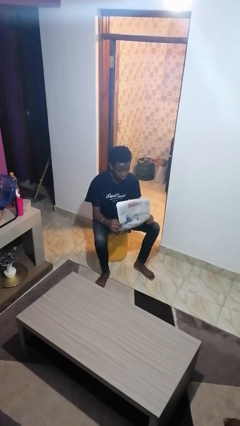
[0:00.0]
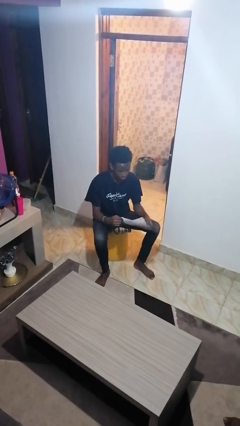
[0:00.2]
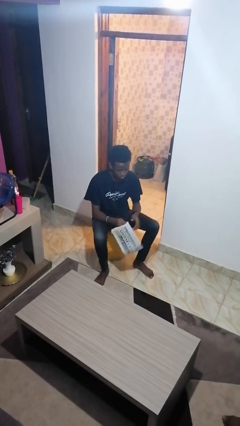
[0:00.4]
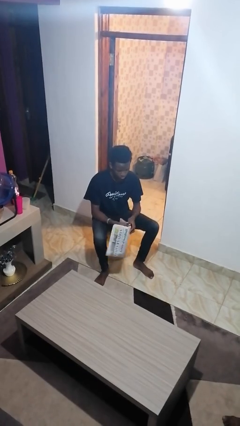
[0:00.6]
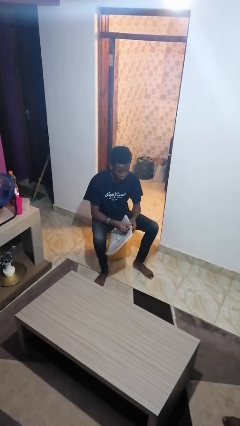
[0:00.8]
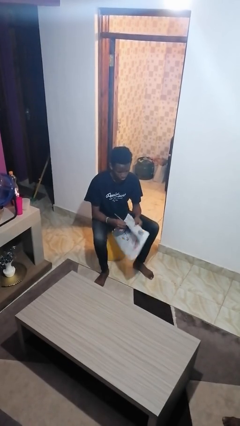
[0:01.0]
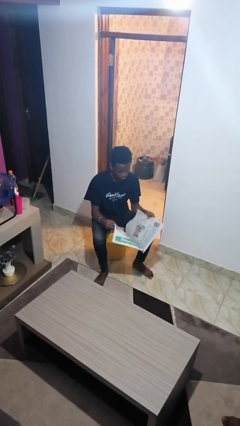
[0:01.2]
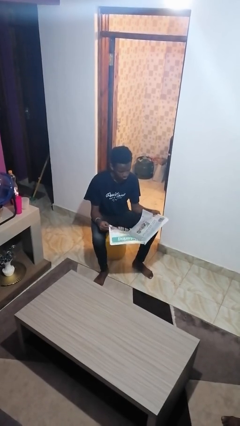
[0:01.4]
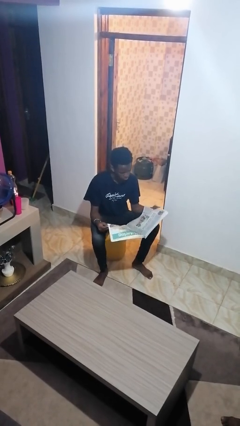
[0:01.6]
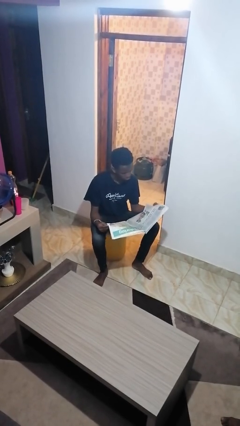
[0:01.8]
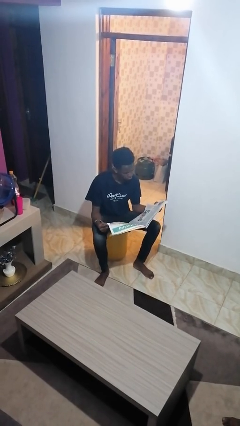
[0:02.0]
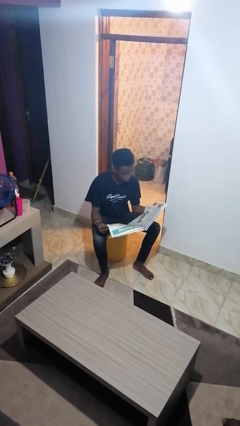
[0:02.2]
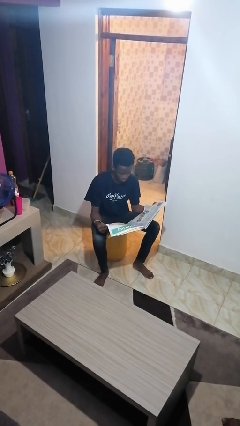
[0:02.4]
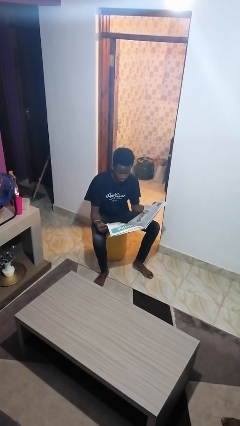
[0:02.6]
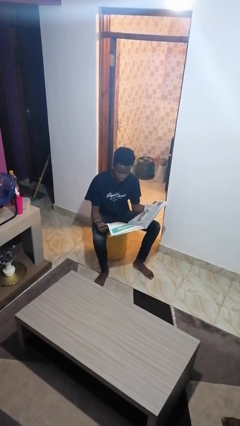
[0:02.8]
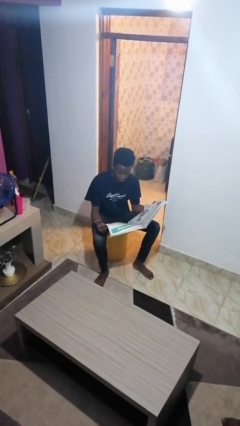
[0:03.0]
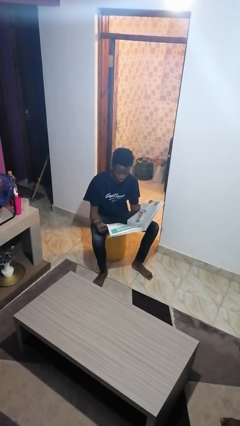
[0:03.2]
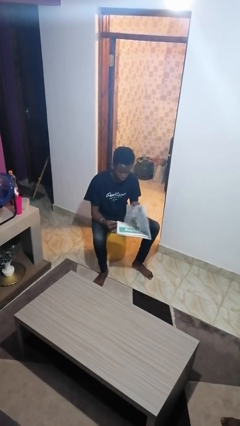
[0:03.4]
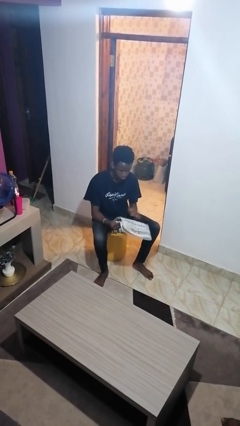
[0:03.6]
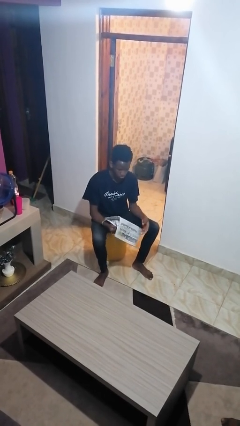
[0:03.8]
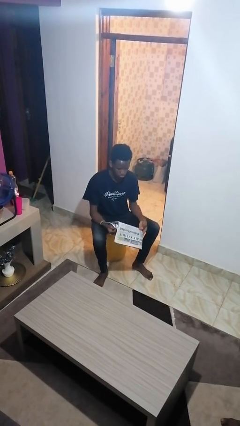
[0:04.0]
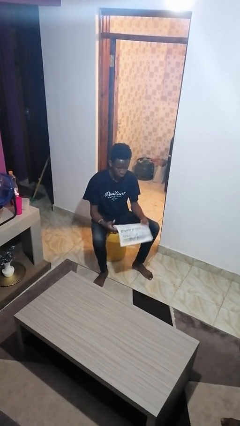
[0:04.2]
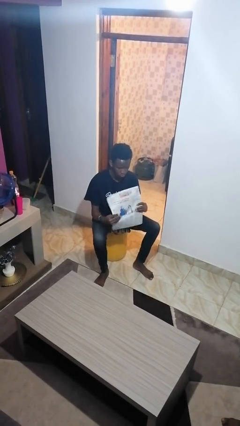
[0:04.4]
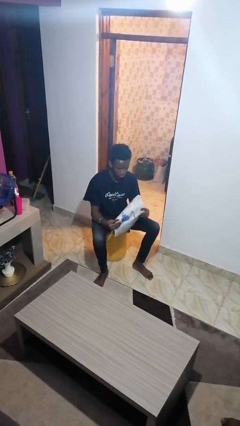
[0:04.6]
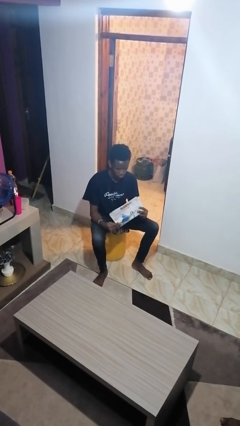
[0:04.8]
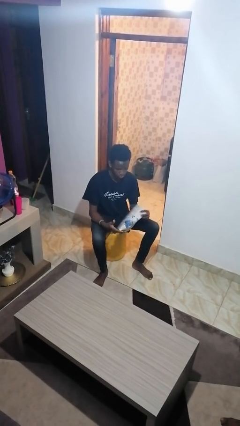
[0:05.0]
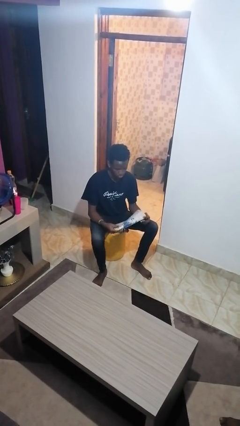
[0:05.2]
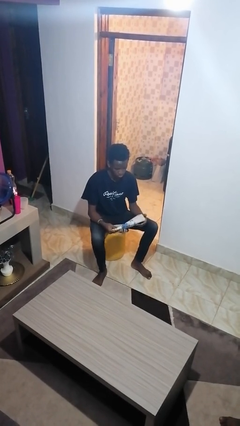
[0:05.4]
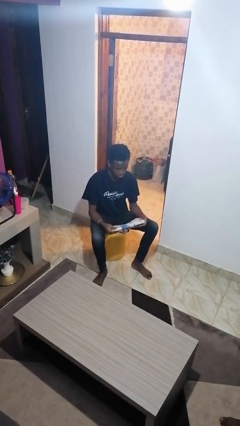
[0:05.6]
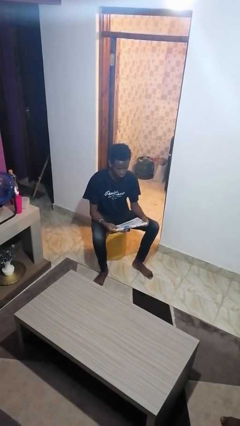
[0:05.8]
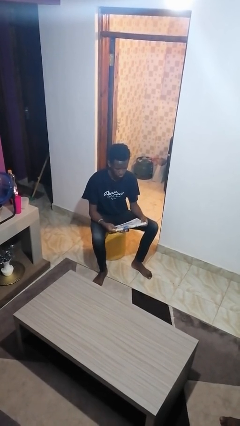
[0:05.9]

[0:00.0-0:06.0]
person reads newspaper

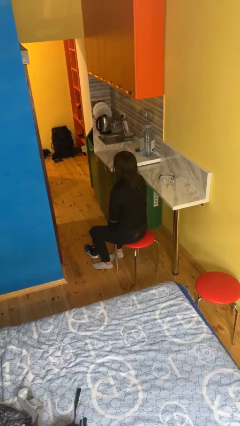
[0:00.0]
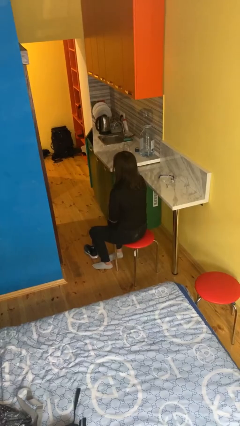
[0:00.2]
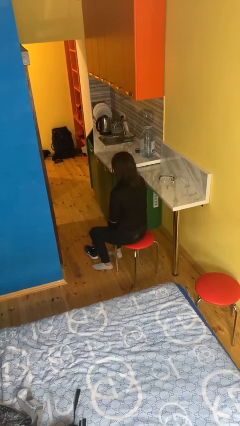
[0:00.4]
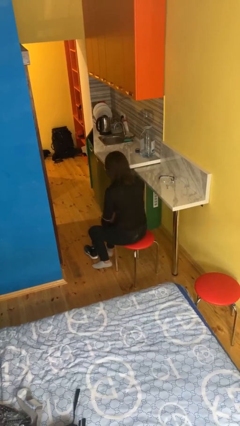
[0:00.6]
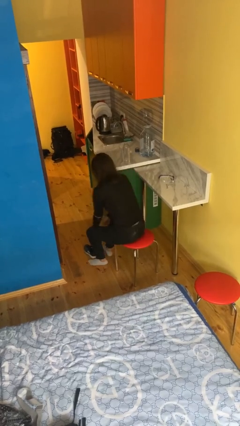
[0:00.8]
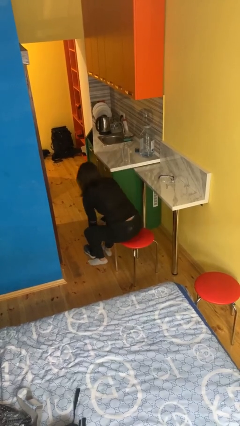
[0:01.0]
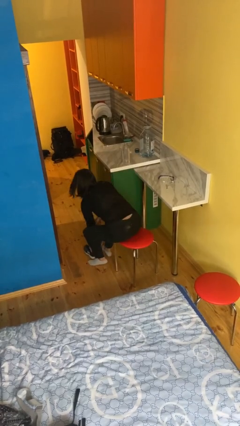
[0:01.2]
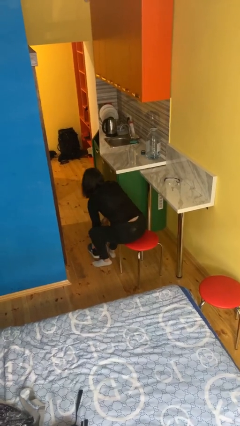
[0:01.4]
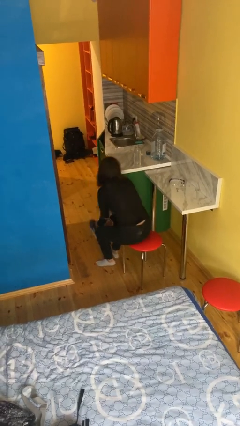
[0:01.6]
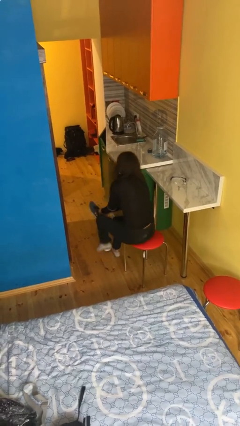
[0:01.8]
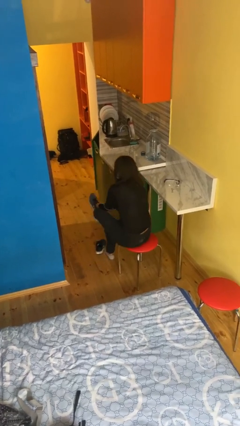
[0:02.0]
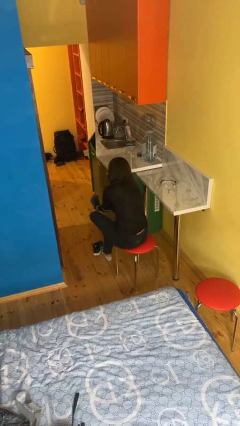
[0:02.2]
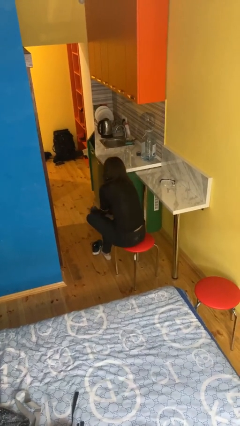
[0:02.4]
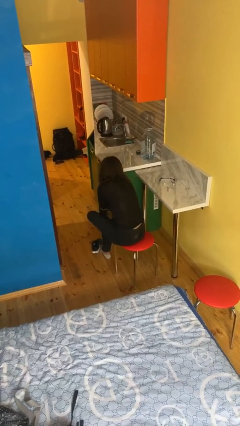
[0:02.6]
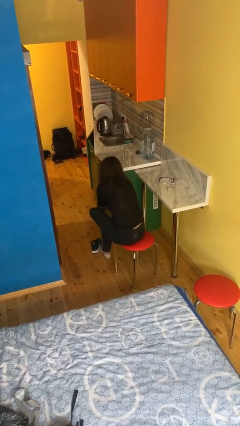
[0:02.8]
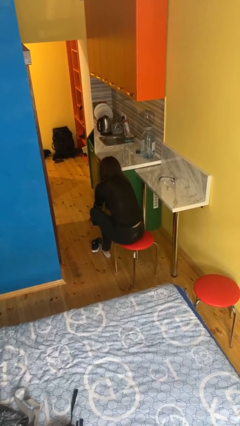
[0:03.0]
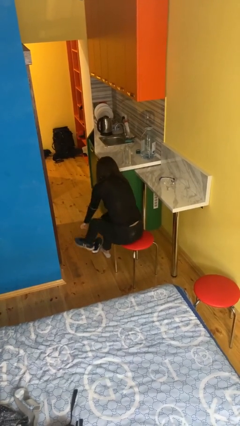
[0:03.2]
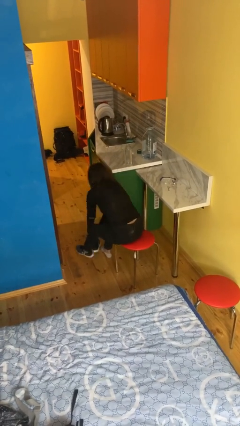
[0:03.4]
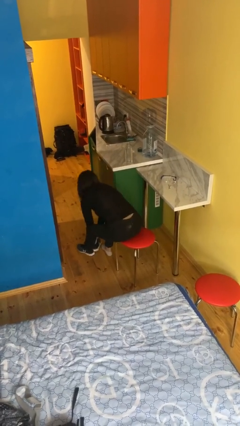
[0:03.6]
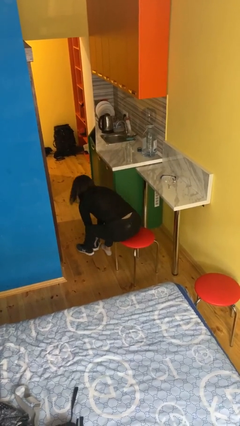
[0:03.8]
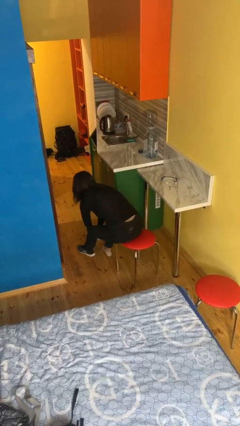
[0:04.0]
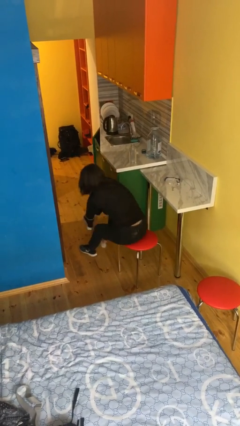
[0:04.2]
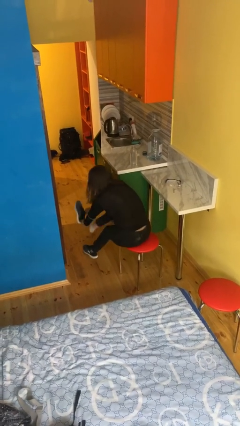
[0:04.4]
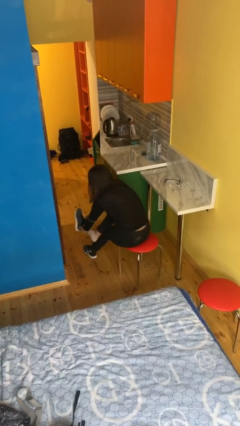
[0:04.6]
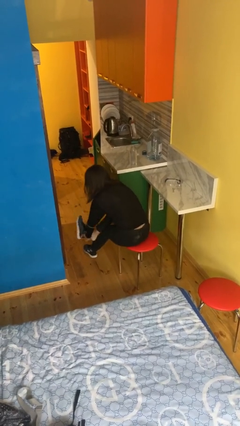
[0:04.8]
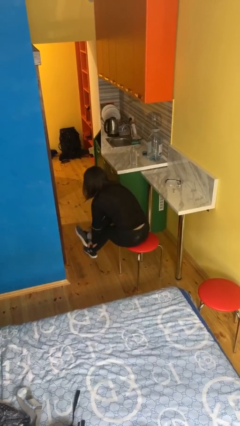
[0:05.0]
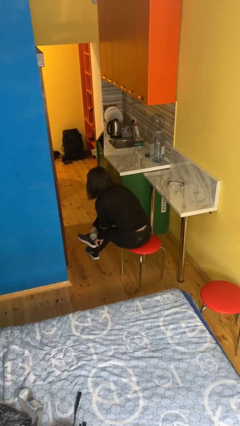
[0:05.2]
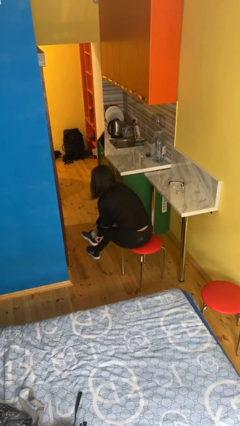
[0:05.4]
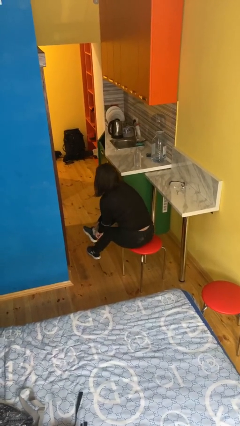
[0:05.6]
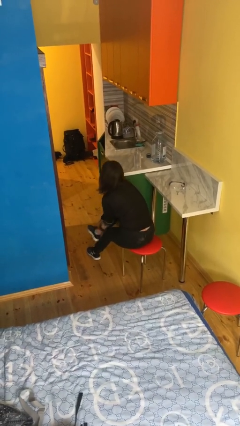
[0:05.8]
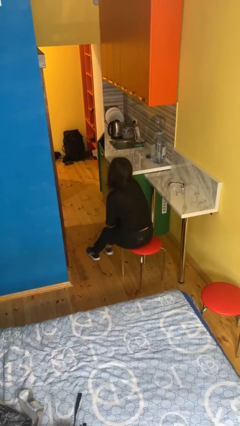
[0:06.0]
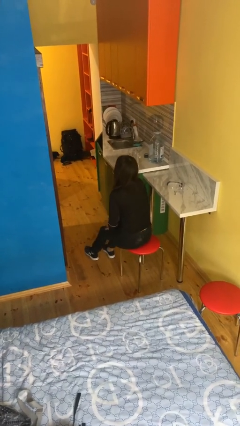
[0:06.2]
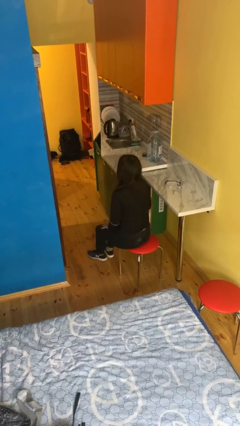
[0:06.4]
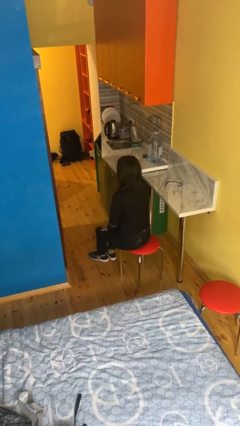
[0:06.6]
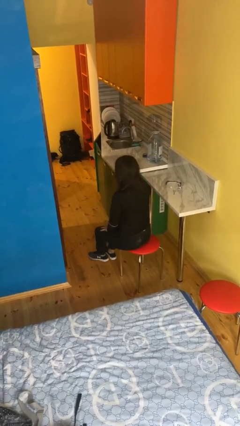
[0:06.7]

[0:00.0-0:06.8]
person puts on shoes

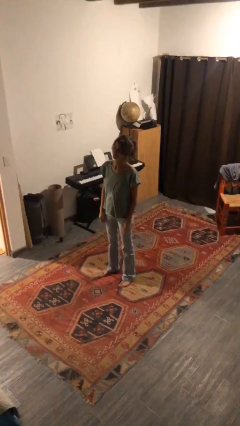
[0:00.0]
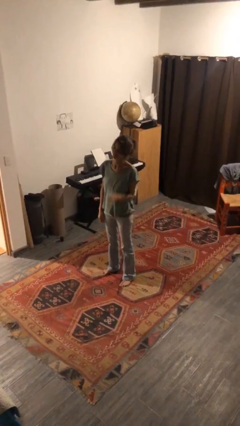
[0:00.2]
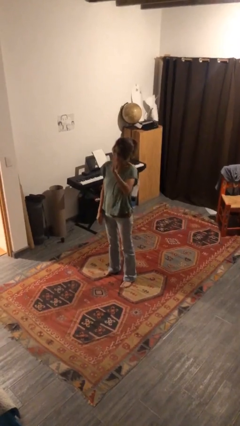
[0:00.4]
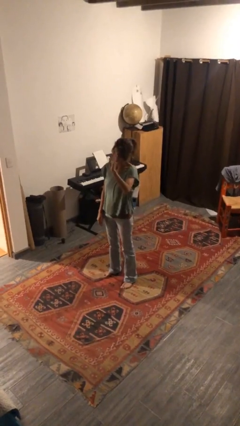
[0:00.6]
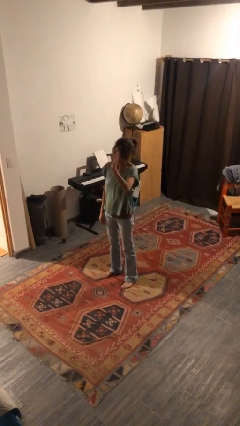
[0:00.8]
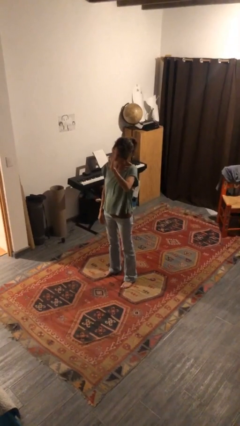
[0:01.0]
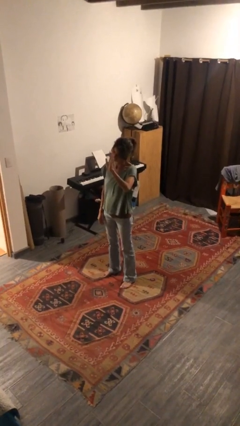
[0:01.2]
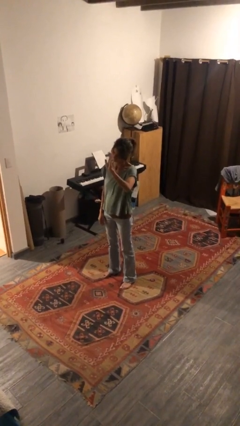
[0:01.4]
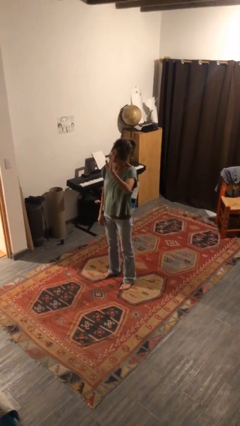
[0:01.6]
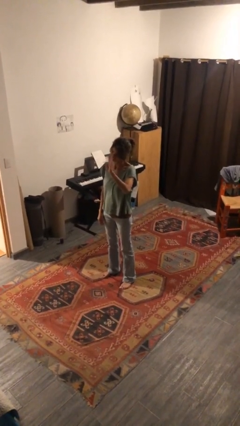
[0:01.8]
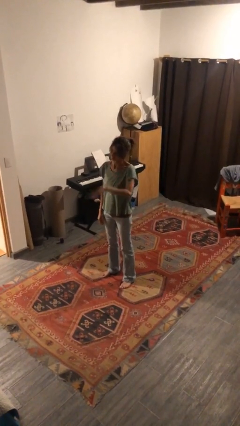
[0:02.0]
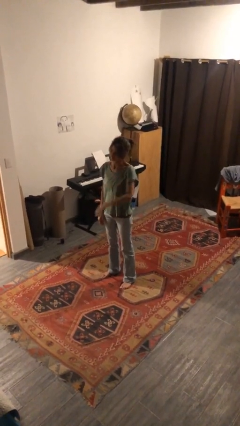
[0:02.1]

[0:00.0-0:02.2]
person waves at person

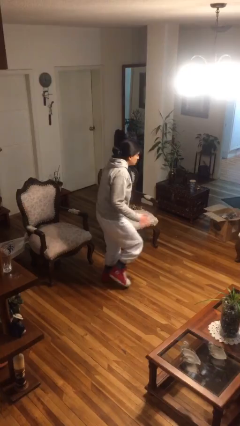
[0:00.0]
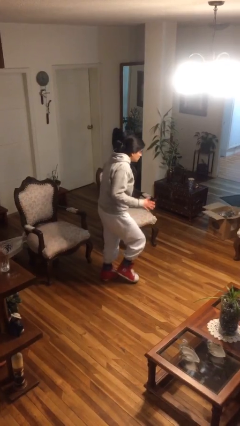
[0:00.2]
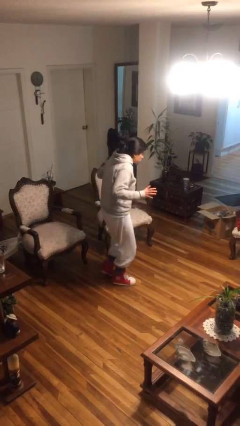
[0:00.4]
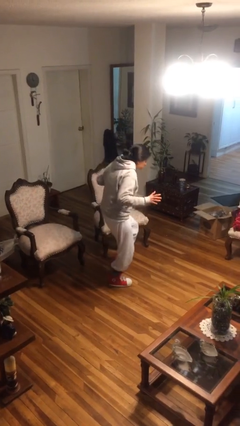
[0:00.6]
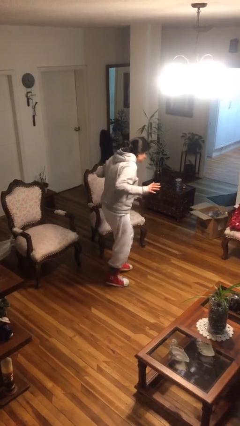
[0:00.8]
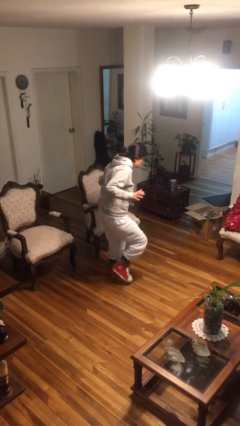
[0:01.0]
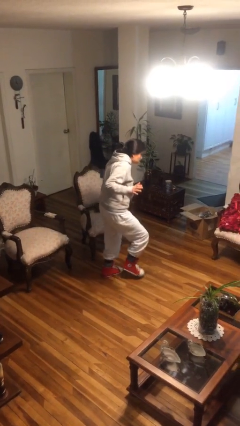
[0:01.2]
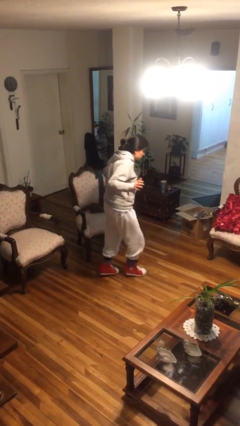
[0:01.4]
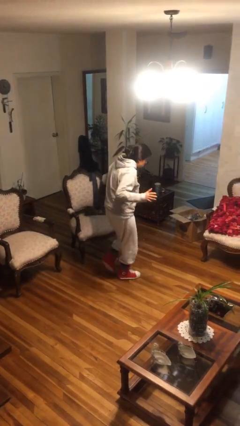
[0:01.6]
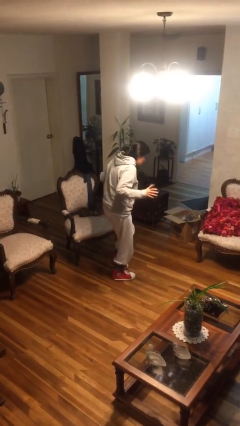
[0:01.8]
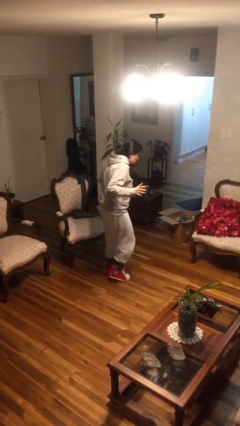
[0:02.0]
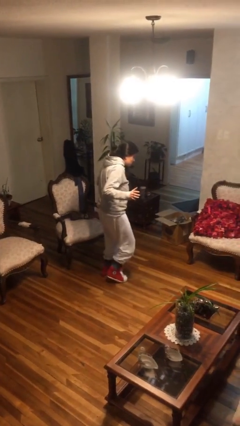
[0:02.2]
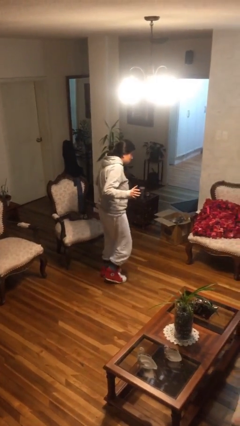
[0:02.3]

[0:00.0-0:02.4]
person walks tiptoe

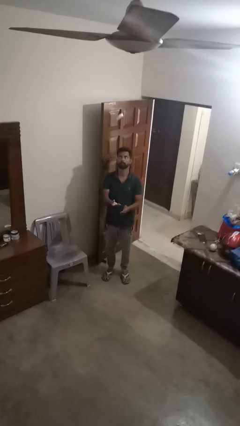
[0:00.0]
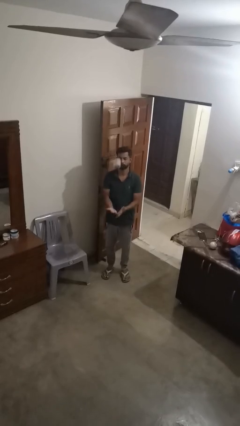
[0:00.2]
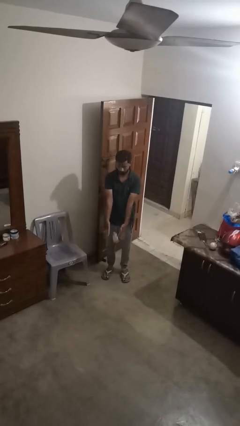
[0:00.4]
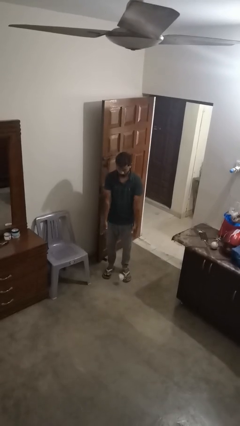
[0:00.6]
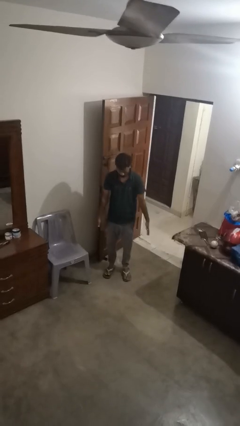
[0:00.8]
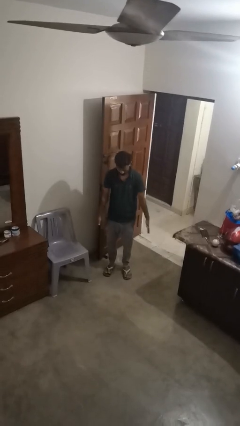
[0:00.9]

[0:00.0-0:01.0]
person catches dropped object
